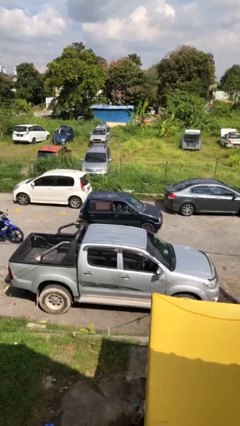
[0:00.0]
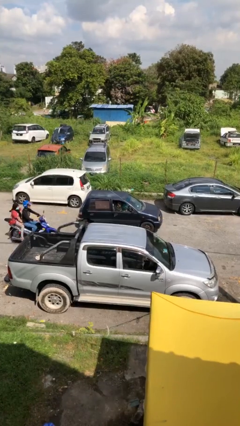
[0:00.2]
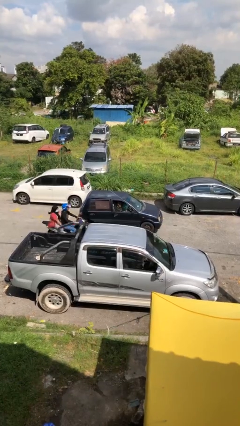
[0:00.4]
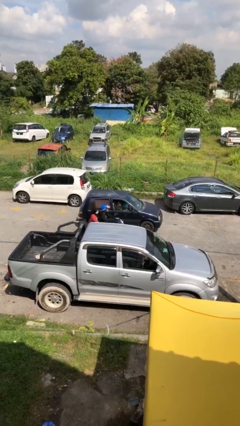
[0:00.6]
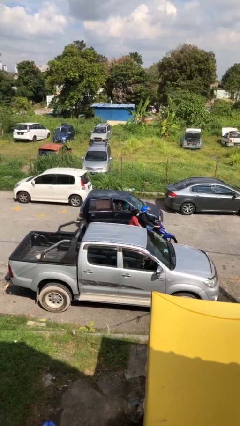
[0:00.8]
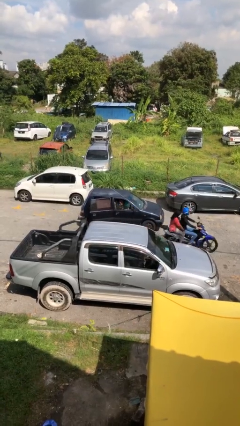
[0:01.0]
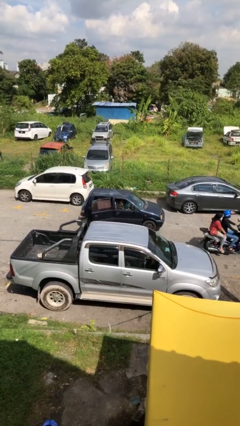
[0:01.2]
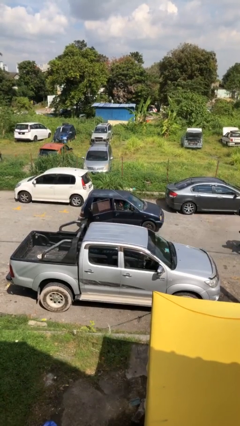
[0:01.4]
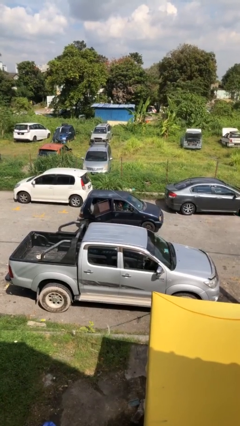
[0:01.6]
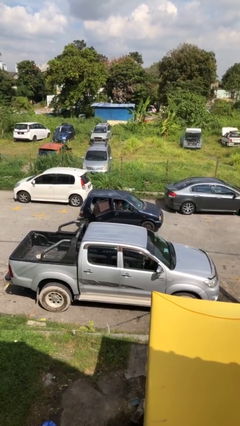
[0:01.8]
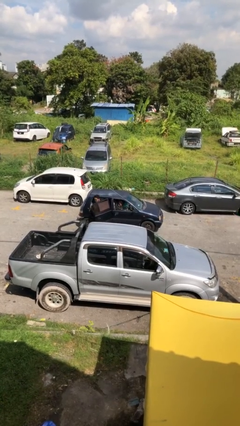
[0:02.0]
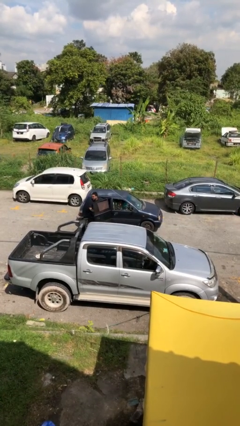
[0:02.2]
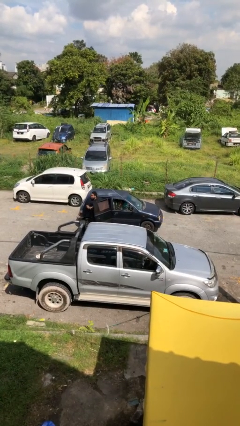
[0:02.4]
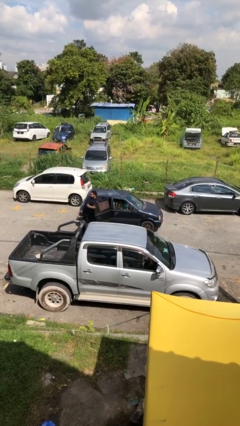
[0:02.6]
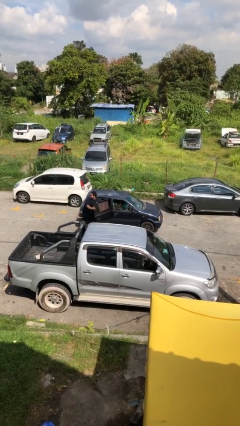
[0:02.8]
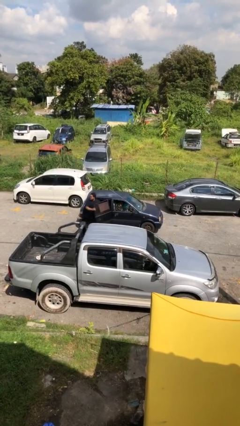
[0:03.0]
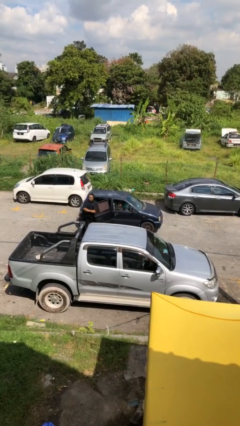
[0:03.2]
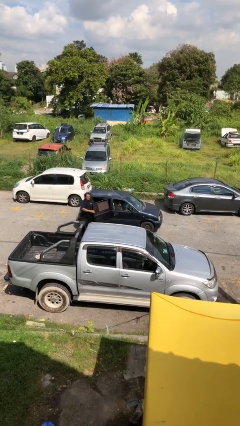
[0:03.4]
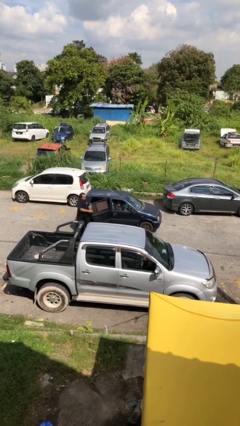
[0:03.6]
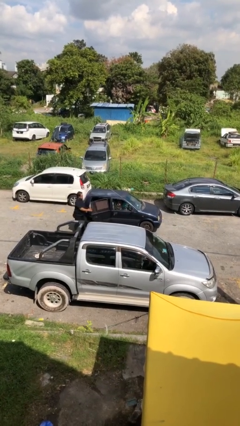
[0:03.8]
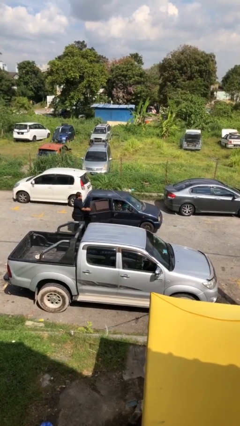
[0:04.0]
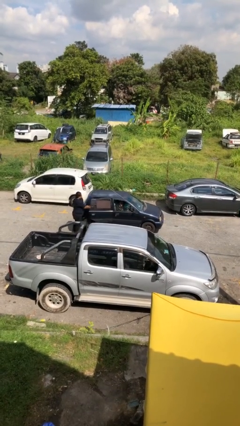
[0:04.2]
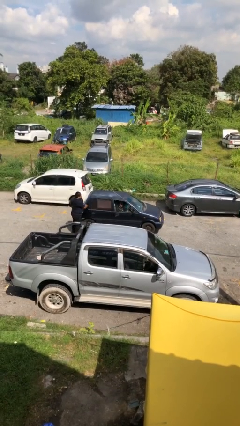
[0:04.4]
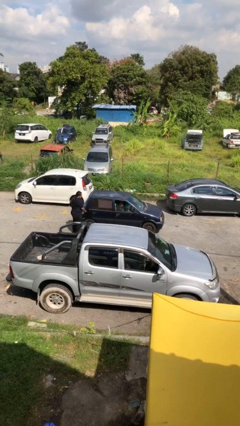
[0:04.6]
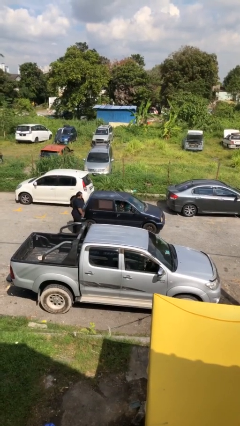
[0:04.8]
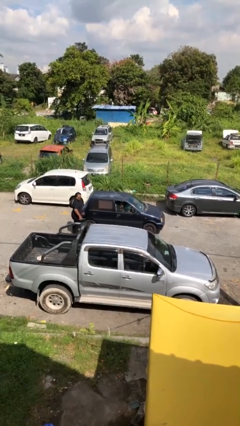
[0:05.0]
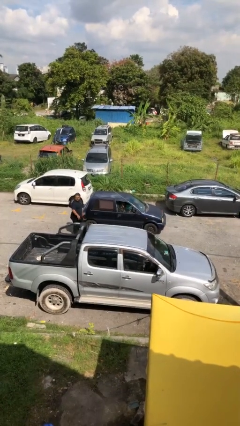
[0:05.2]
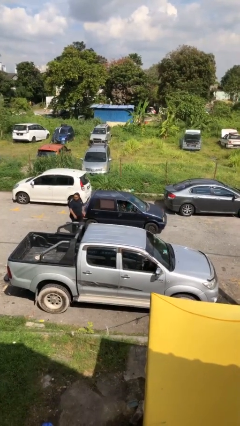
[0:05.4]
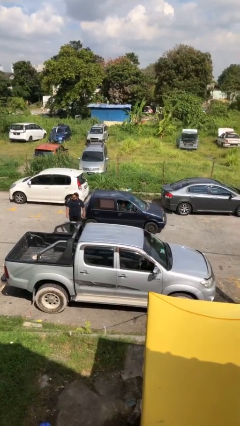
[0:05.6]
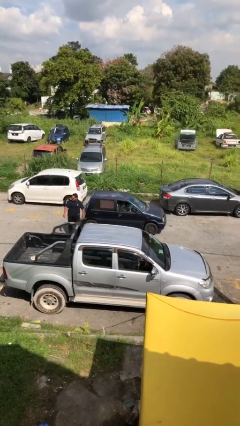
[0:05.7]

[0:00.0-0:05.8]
car drops off person

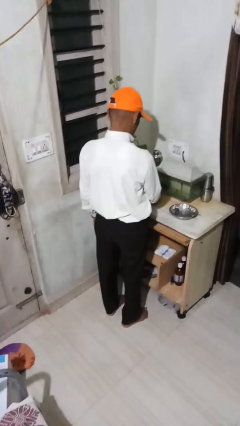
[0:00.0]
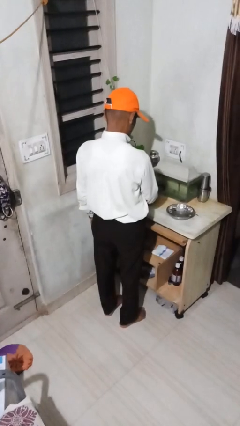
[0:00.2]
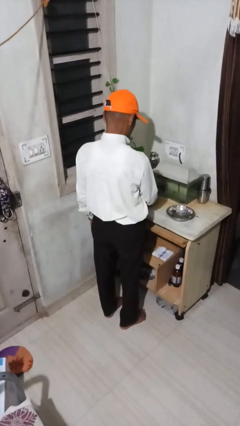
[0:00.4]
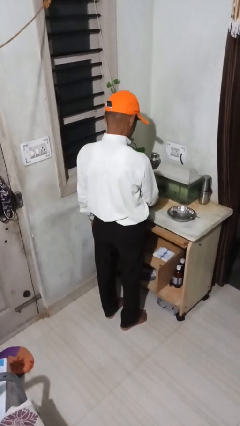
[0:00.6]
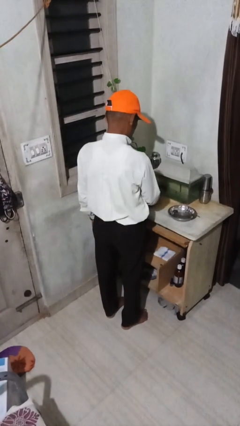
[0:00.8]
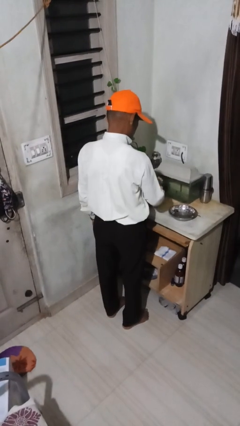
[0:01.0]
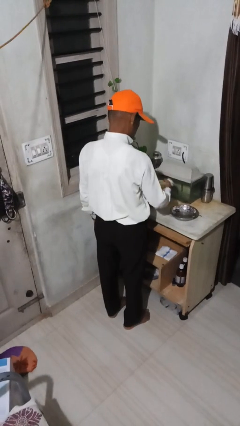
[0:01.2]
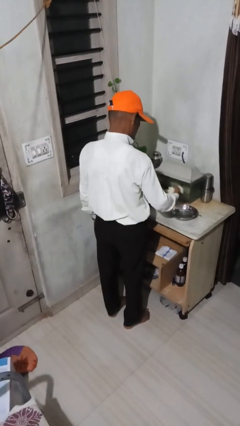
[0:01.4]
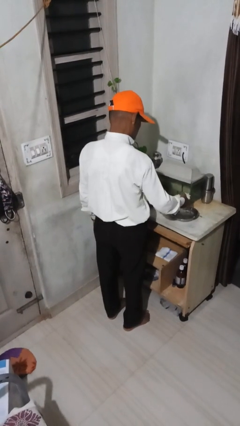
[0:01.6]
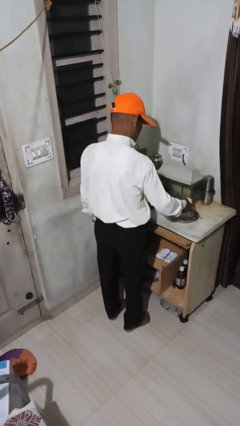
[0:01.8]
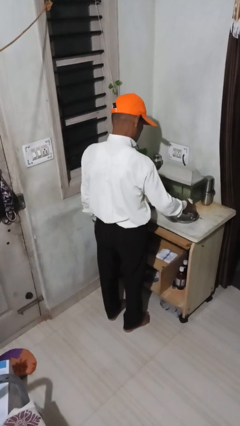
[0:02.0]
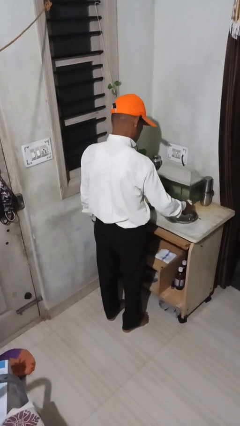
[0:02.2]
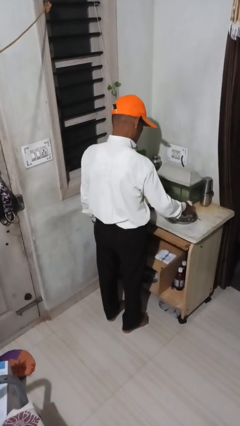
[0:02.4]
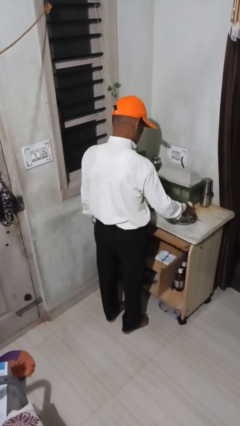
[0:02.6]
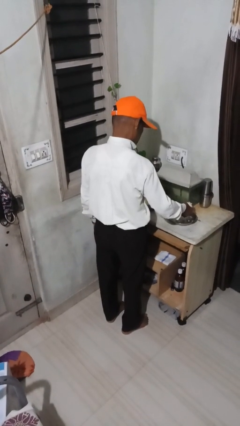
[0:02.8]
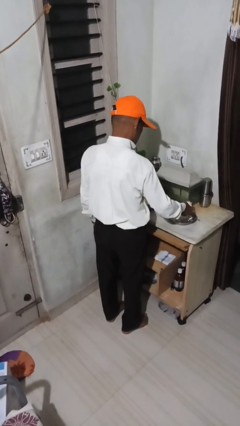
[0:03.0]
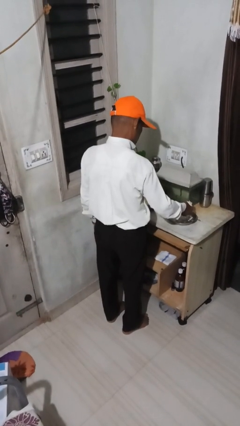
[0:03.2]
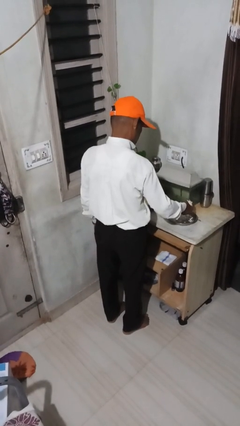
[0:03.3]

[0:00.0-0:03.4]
person pours into bowl

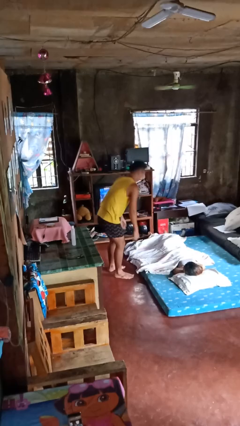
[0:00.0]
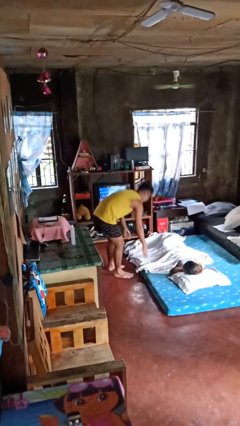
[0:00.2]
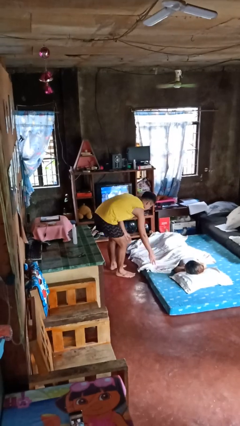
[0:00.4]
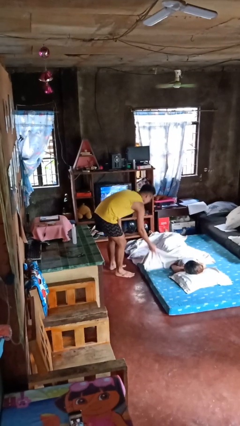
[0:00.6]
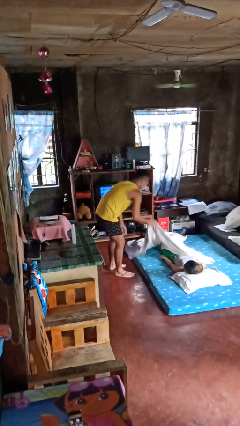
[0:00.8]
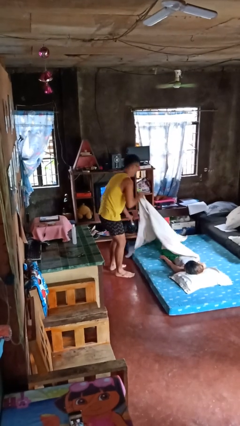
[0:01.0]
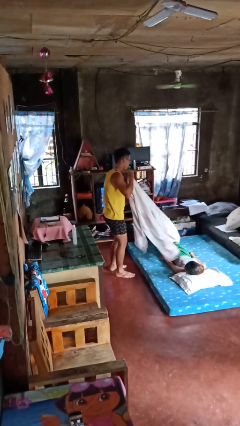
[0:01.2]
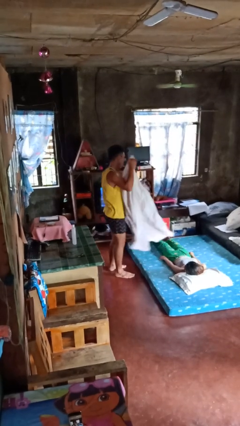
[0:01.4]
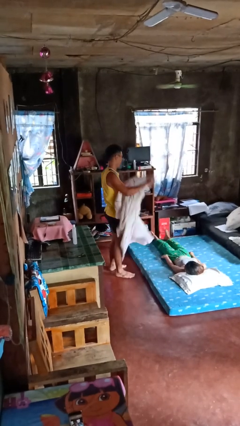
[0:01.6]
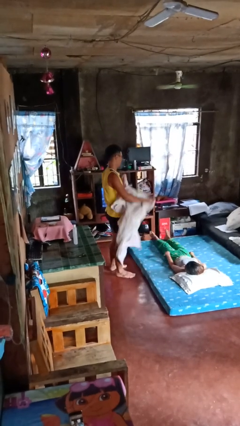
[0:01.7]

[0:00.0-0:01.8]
person uncovers friend with blanket

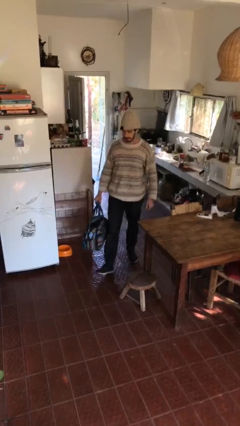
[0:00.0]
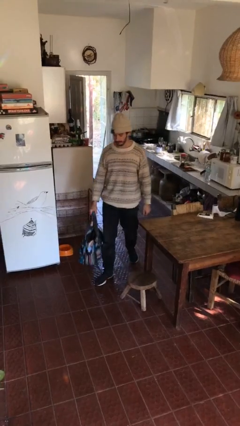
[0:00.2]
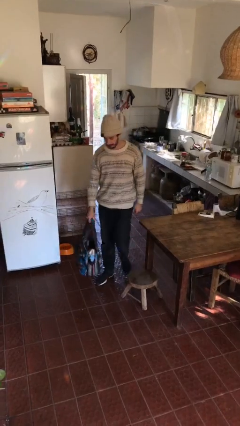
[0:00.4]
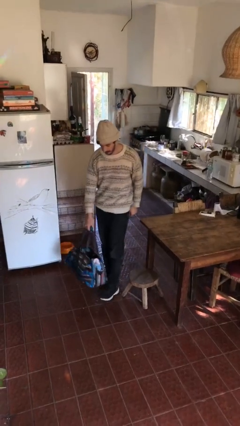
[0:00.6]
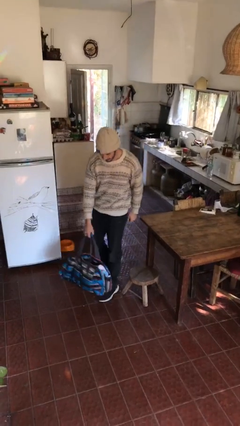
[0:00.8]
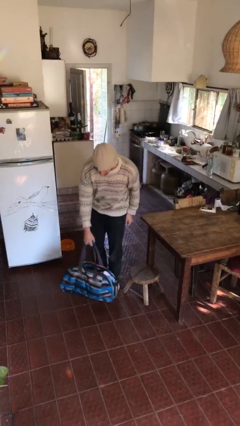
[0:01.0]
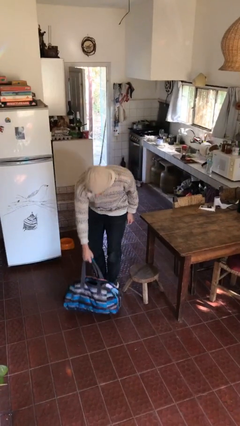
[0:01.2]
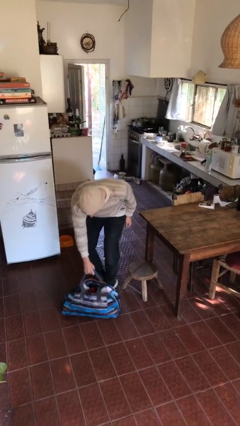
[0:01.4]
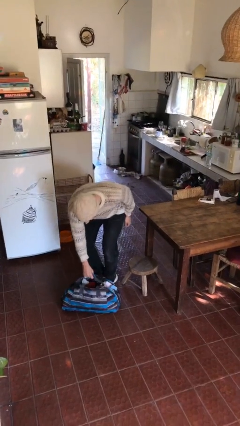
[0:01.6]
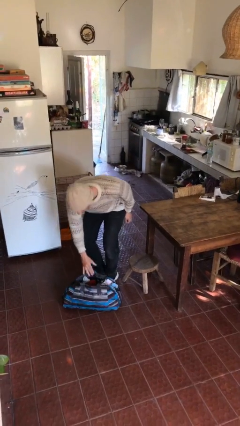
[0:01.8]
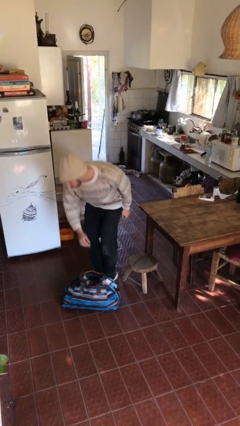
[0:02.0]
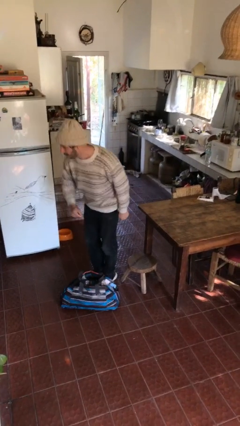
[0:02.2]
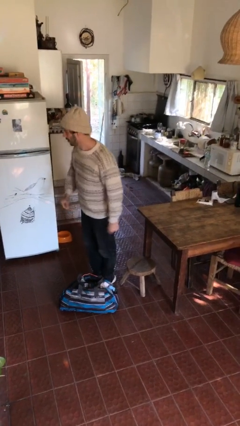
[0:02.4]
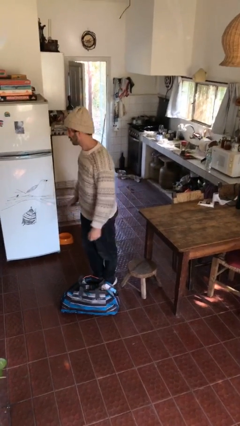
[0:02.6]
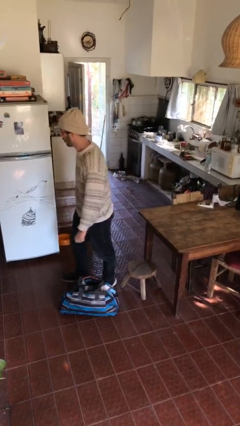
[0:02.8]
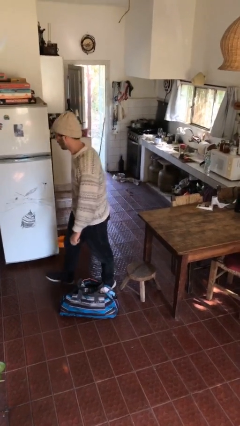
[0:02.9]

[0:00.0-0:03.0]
person puts down object on floor

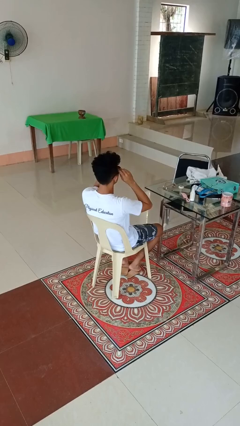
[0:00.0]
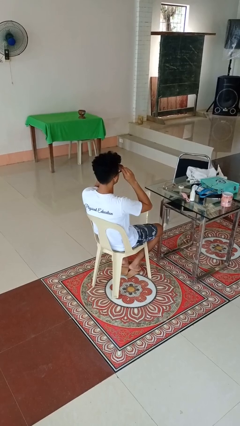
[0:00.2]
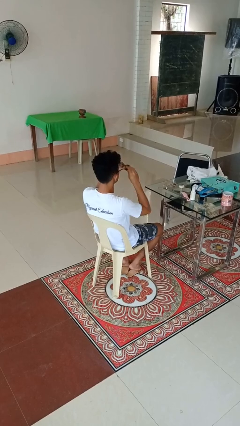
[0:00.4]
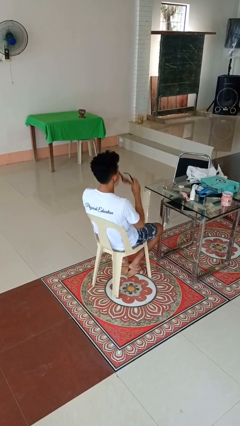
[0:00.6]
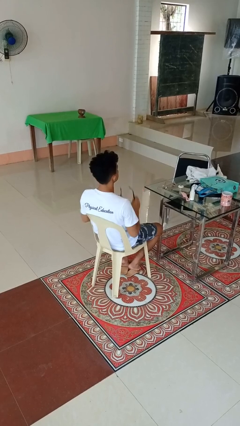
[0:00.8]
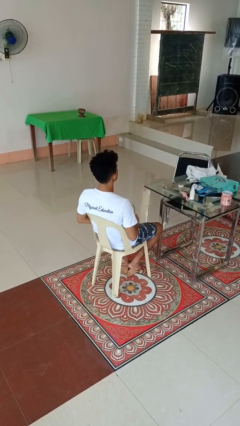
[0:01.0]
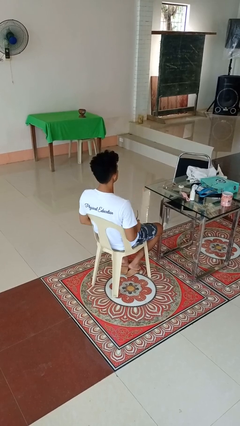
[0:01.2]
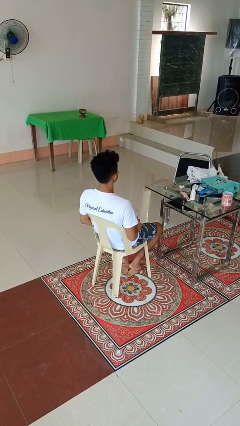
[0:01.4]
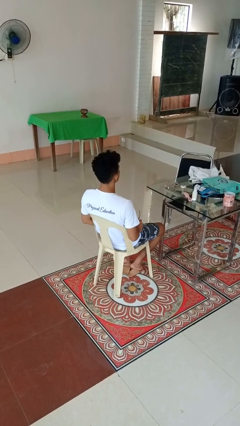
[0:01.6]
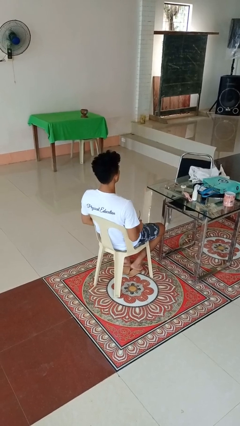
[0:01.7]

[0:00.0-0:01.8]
person takes off sunglasses

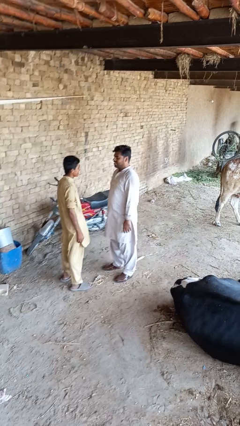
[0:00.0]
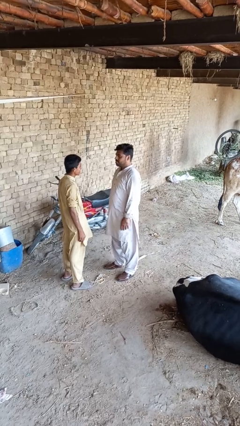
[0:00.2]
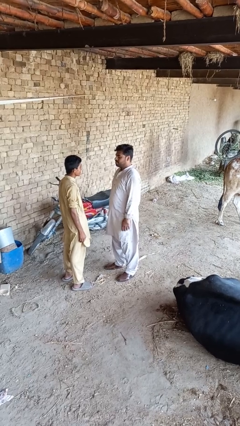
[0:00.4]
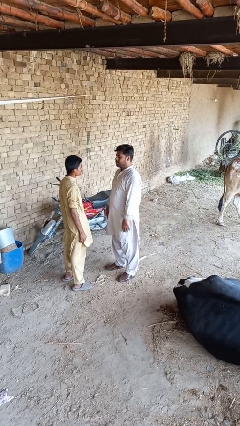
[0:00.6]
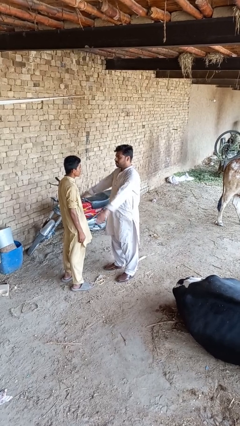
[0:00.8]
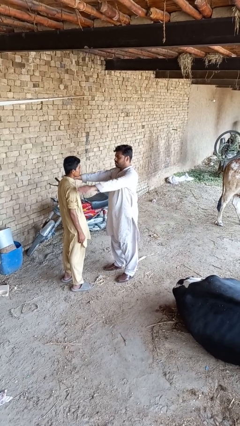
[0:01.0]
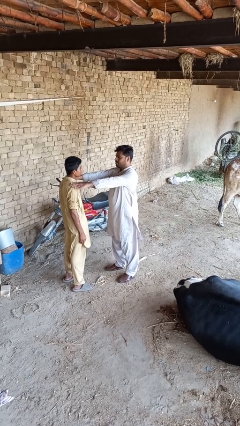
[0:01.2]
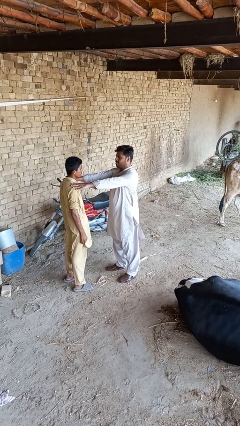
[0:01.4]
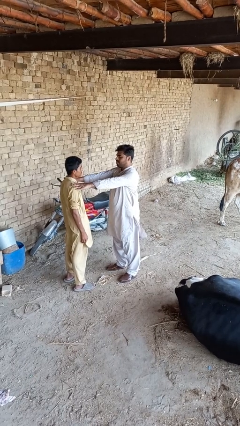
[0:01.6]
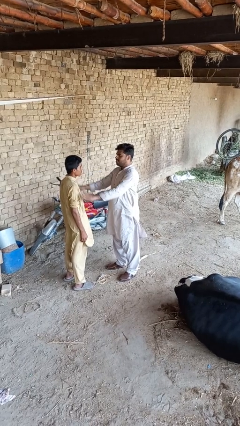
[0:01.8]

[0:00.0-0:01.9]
person pounds shoulders of person
